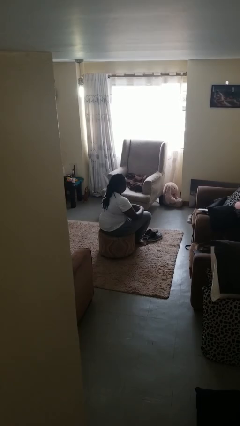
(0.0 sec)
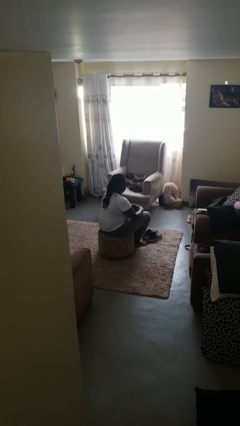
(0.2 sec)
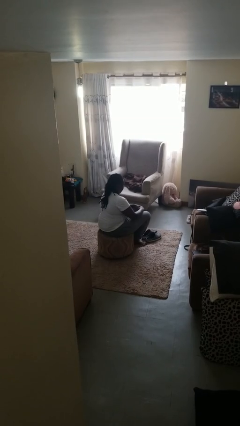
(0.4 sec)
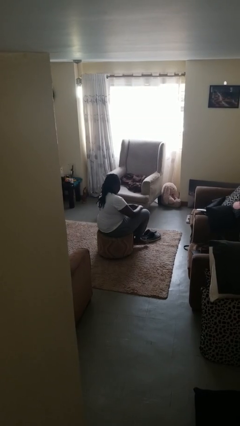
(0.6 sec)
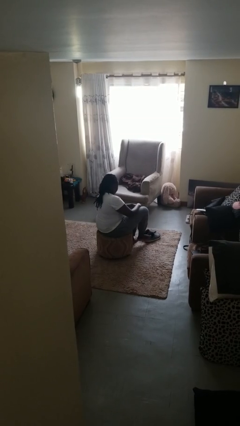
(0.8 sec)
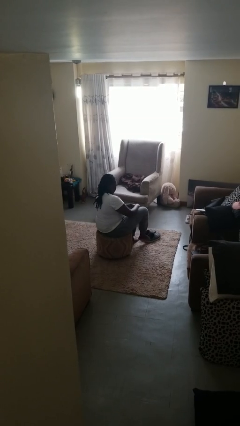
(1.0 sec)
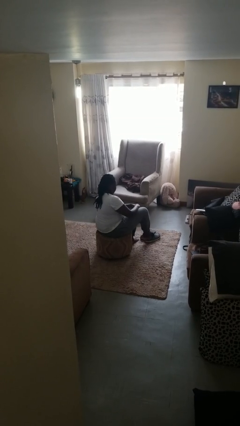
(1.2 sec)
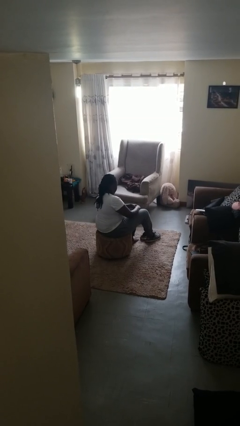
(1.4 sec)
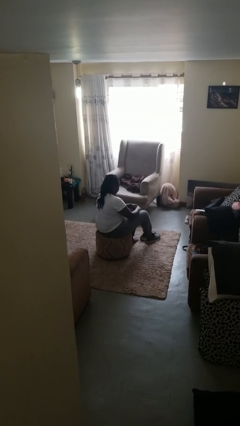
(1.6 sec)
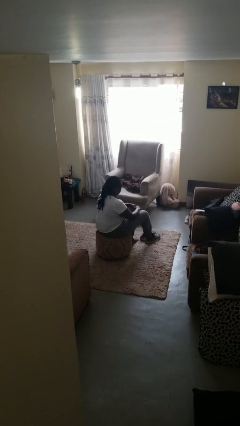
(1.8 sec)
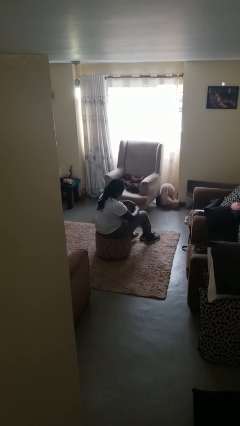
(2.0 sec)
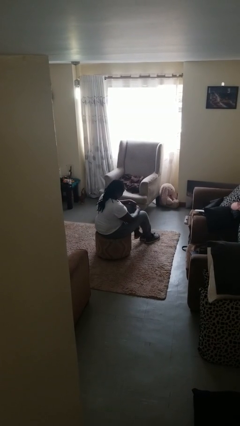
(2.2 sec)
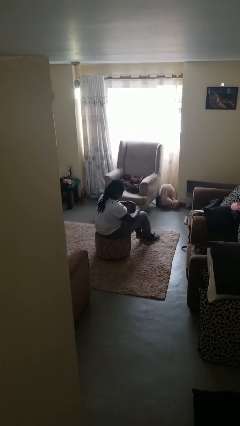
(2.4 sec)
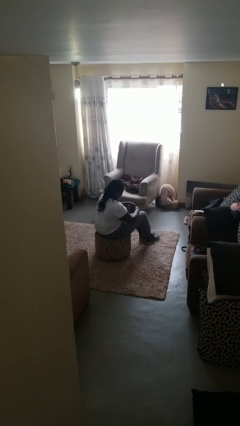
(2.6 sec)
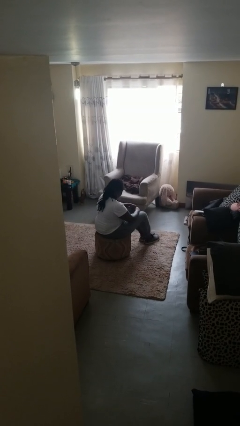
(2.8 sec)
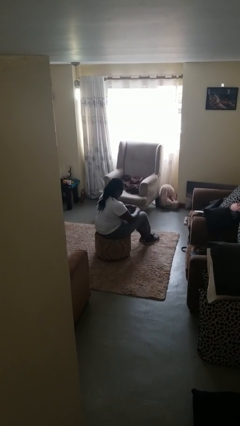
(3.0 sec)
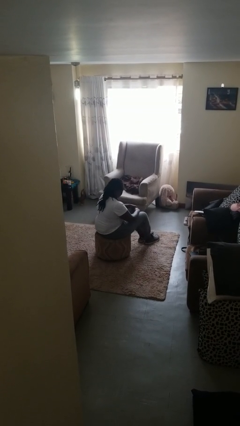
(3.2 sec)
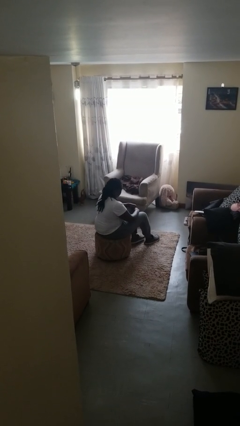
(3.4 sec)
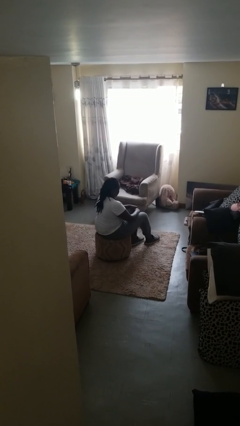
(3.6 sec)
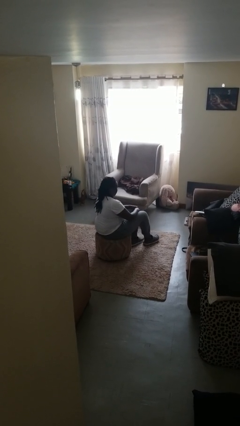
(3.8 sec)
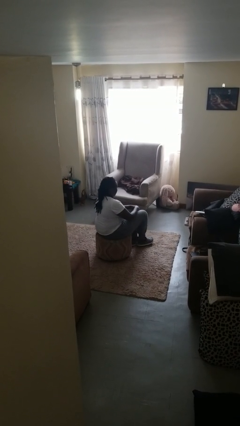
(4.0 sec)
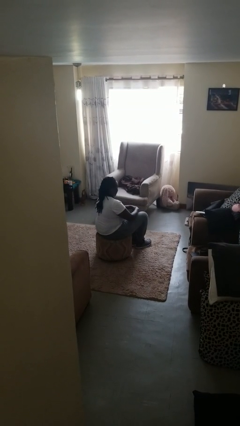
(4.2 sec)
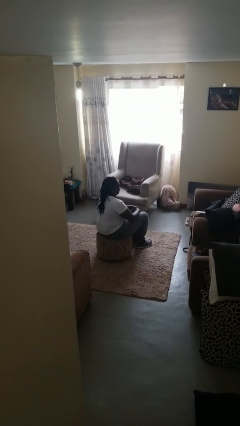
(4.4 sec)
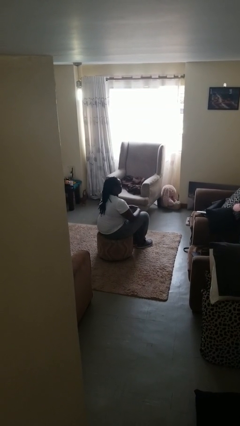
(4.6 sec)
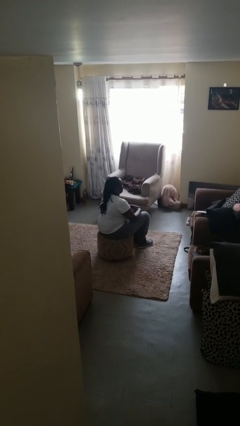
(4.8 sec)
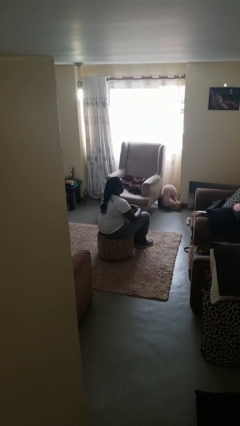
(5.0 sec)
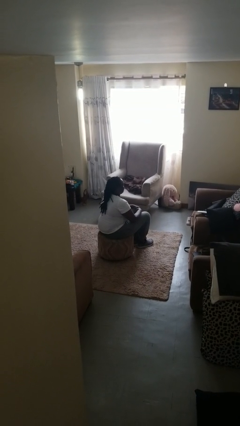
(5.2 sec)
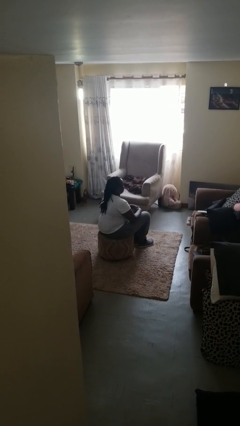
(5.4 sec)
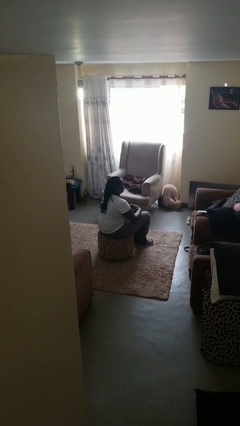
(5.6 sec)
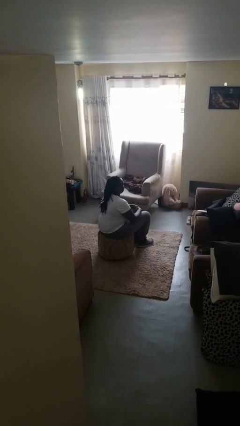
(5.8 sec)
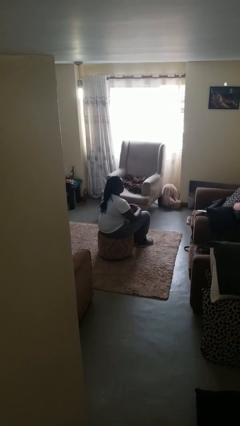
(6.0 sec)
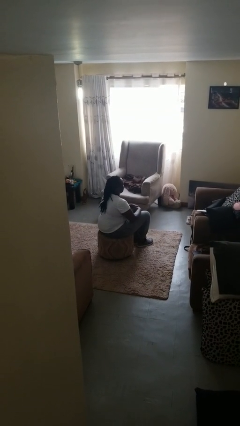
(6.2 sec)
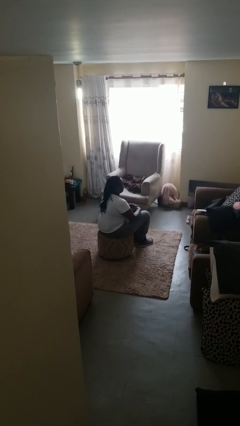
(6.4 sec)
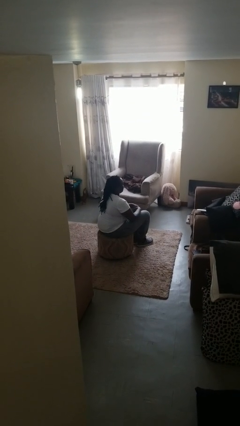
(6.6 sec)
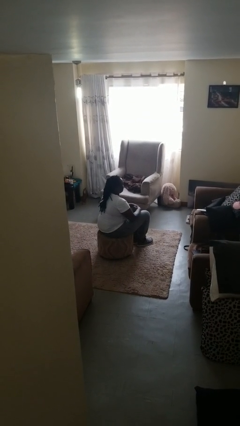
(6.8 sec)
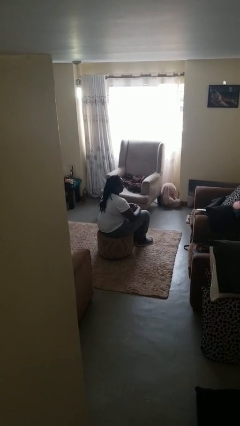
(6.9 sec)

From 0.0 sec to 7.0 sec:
person puts on shoes

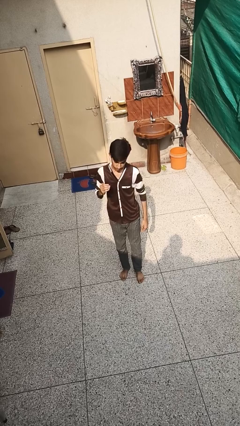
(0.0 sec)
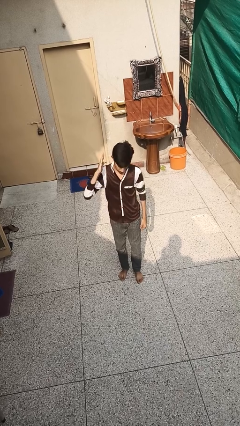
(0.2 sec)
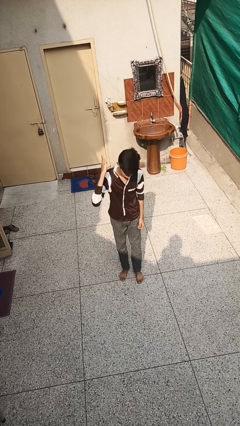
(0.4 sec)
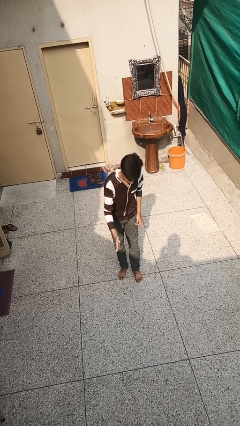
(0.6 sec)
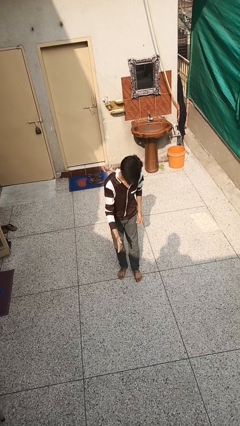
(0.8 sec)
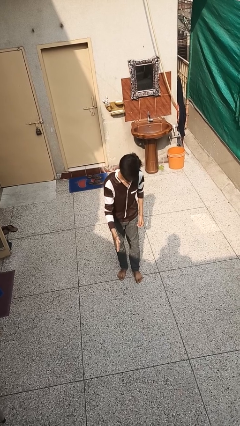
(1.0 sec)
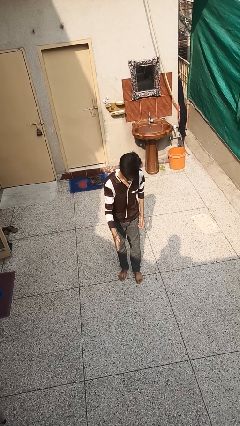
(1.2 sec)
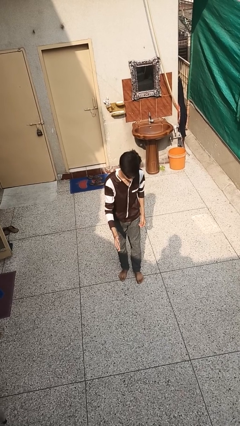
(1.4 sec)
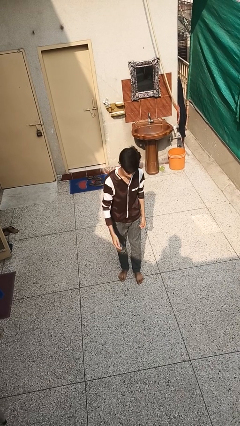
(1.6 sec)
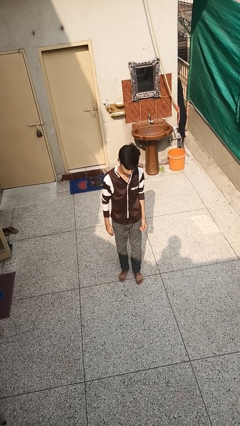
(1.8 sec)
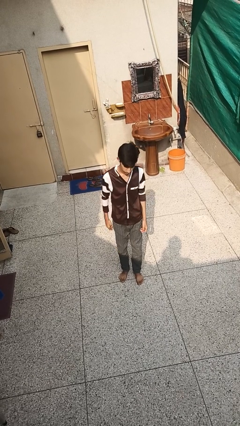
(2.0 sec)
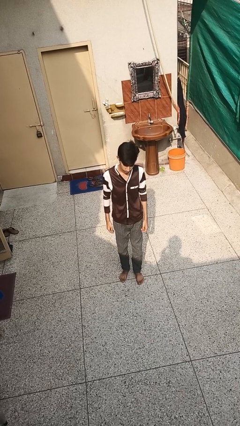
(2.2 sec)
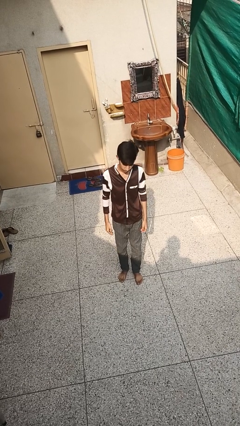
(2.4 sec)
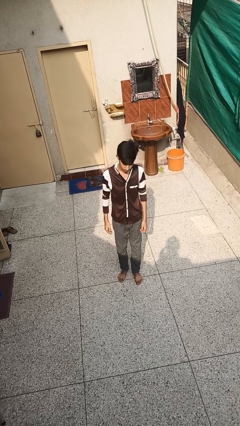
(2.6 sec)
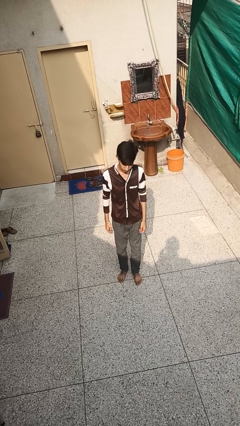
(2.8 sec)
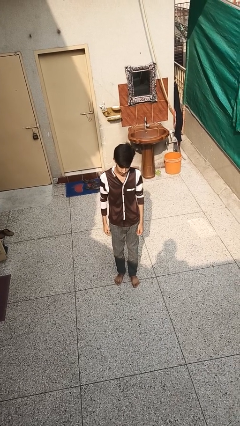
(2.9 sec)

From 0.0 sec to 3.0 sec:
person karate chop

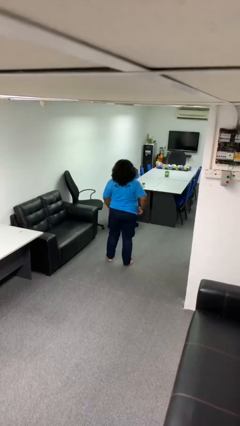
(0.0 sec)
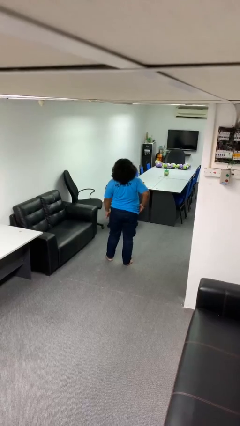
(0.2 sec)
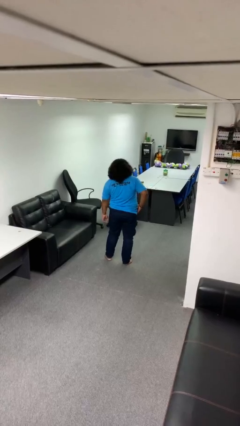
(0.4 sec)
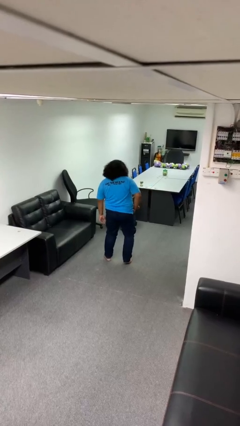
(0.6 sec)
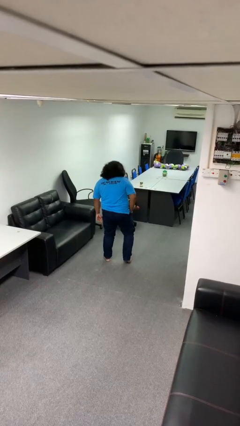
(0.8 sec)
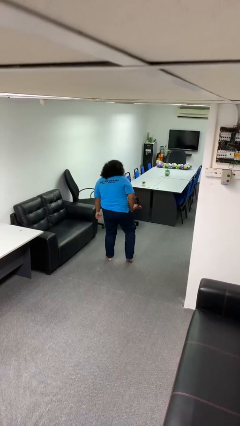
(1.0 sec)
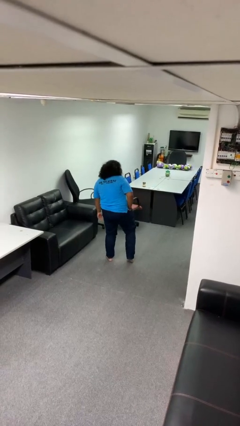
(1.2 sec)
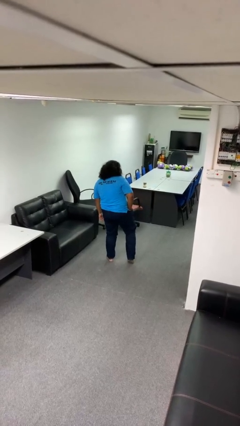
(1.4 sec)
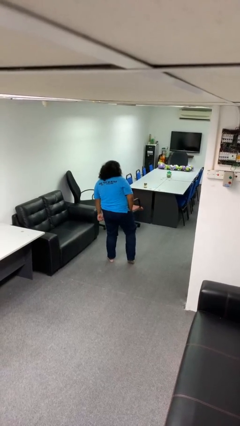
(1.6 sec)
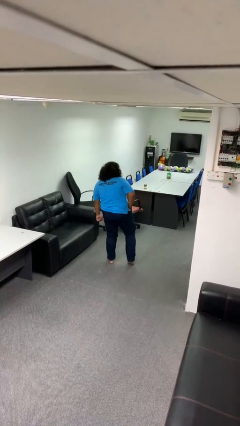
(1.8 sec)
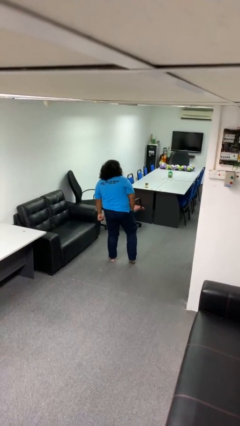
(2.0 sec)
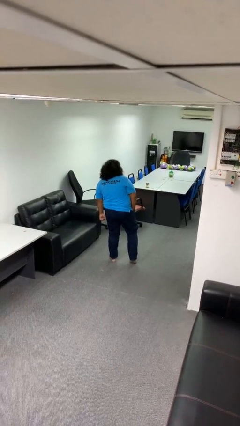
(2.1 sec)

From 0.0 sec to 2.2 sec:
person puts hands in back pockets

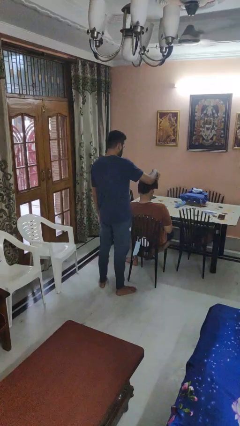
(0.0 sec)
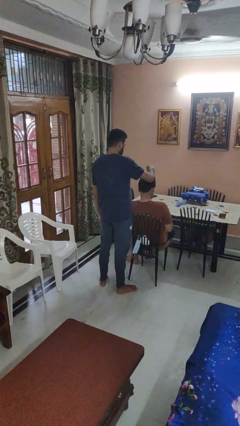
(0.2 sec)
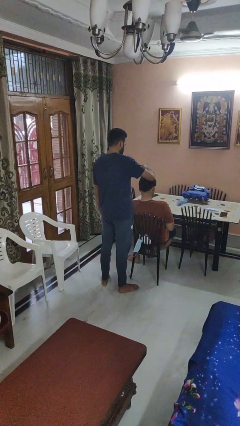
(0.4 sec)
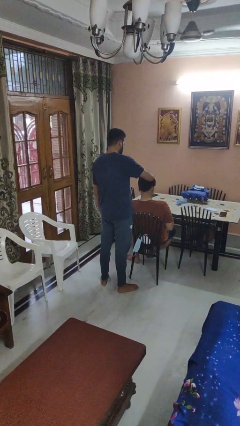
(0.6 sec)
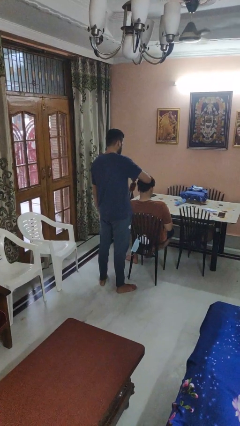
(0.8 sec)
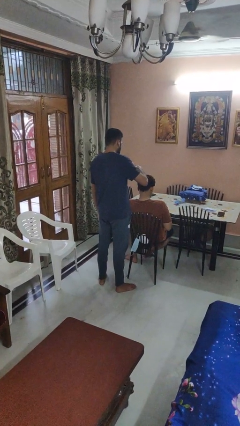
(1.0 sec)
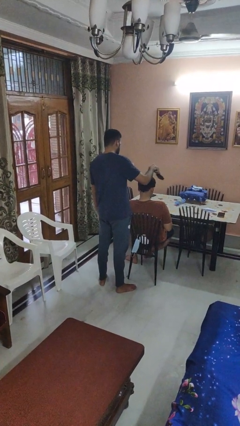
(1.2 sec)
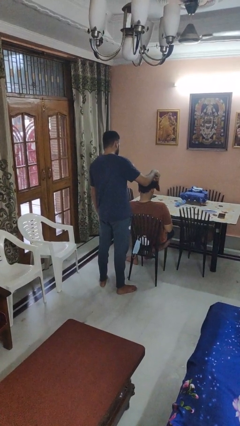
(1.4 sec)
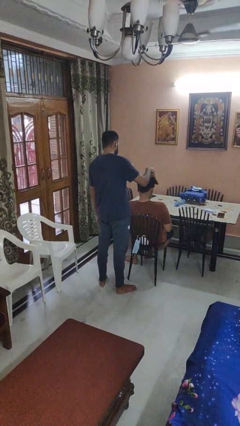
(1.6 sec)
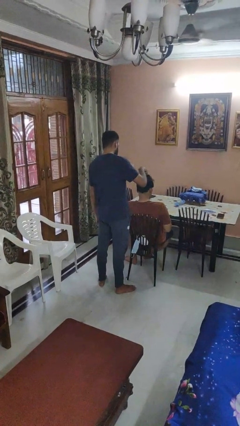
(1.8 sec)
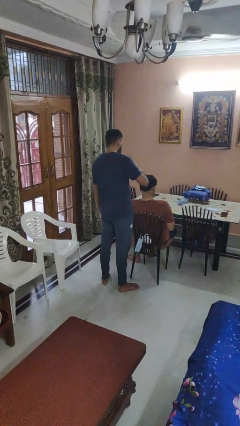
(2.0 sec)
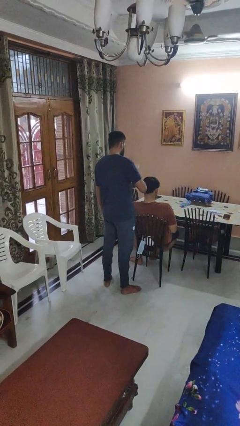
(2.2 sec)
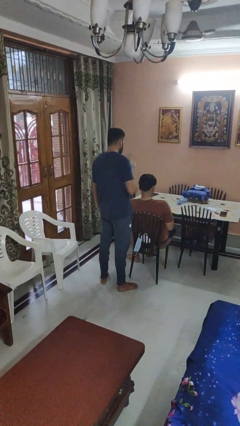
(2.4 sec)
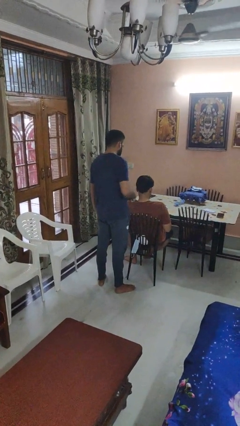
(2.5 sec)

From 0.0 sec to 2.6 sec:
person brushes hair of person

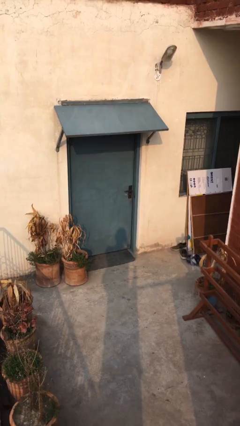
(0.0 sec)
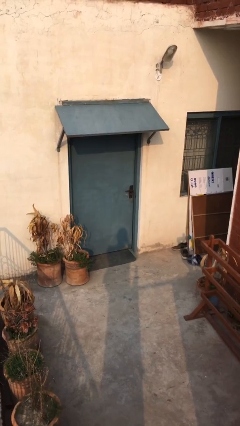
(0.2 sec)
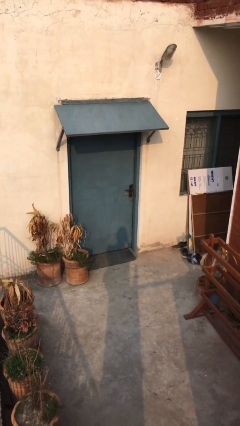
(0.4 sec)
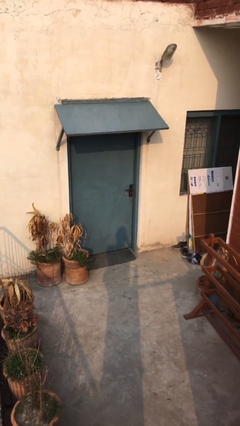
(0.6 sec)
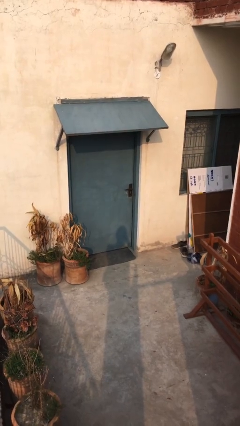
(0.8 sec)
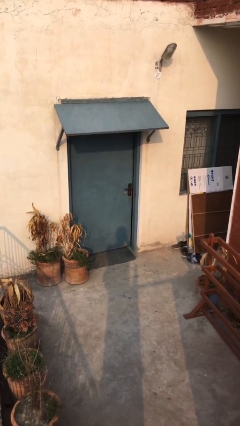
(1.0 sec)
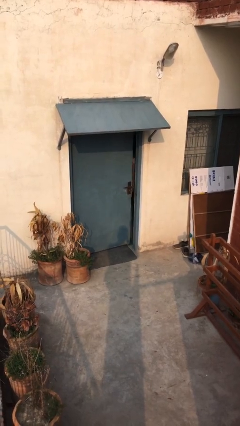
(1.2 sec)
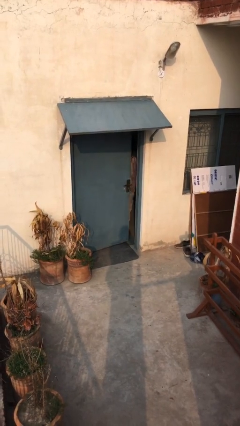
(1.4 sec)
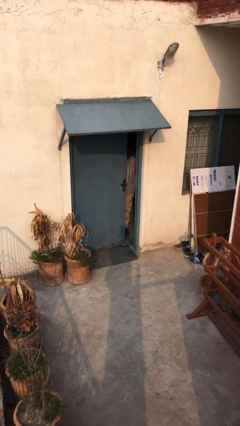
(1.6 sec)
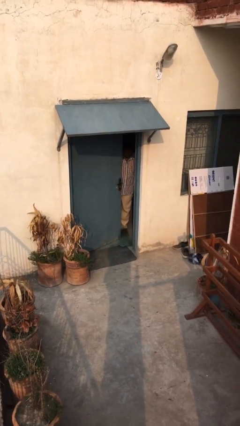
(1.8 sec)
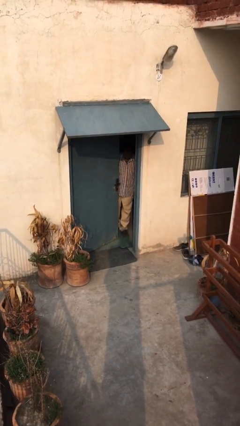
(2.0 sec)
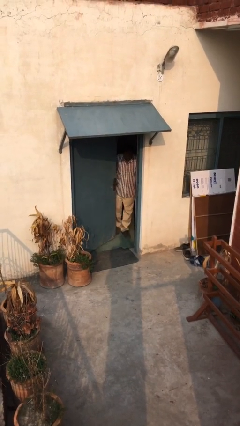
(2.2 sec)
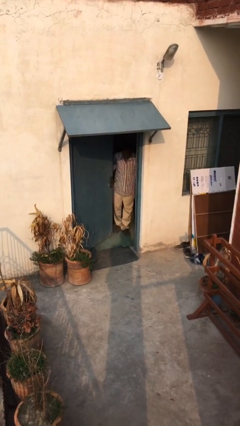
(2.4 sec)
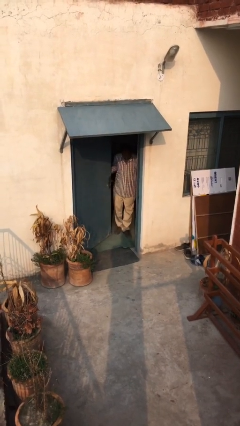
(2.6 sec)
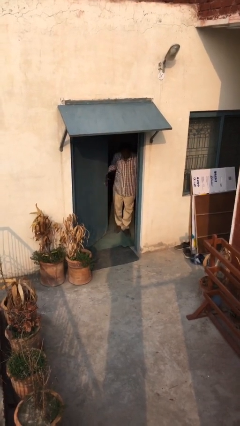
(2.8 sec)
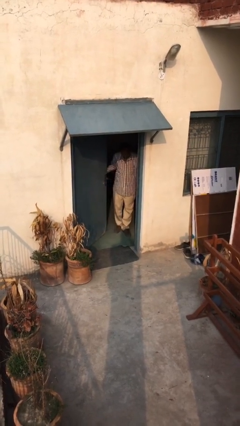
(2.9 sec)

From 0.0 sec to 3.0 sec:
person opens facility door
